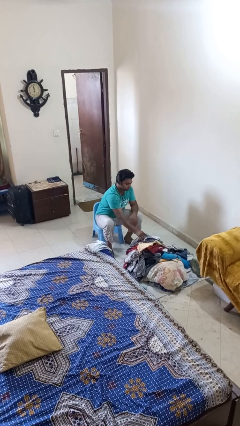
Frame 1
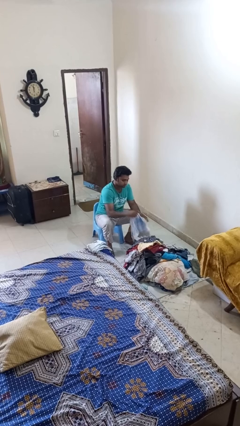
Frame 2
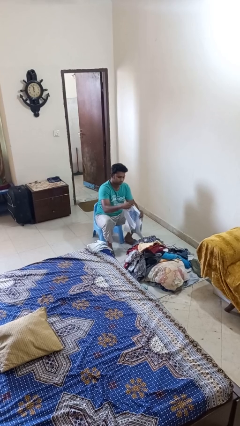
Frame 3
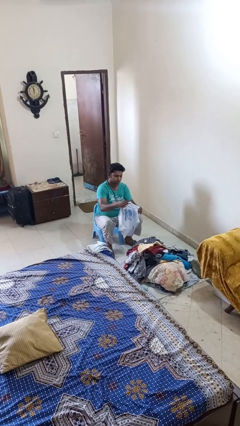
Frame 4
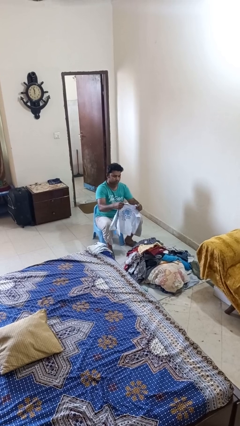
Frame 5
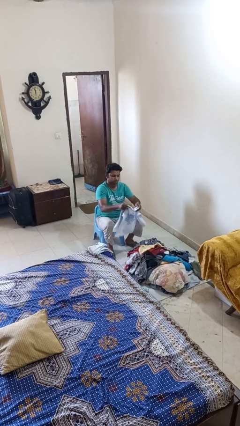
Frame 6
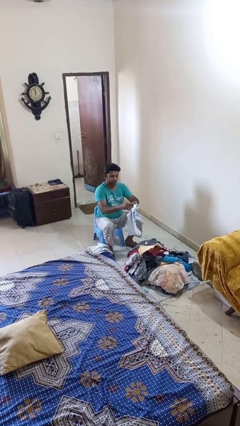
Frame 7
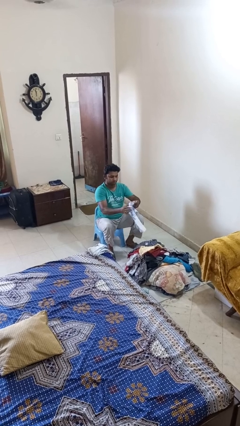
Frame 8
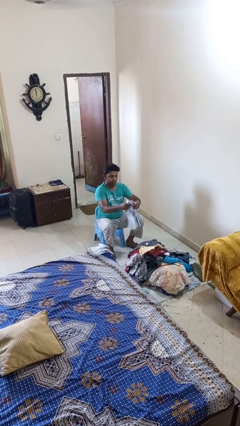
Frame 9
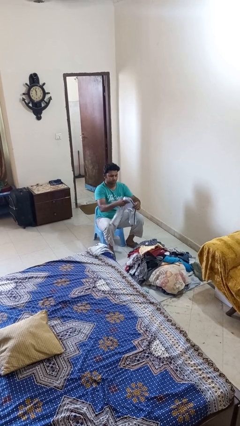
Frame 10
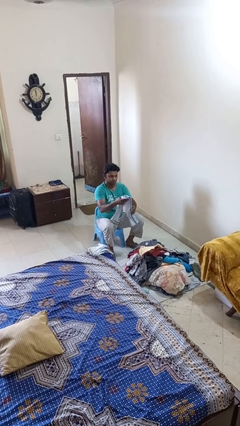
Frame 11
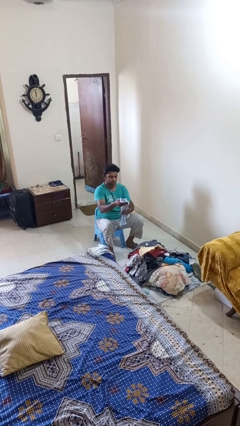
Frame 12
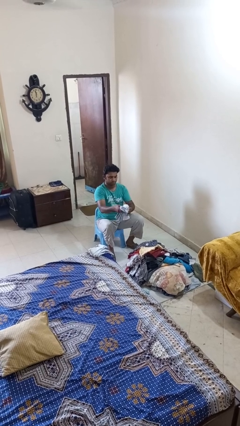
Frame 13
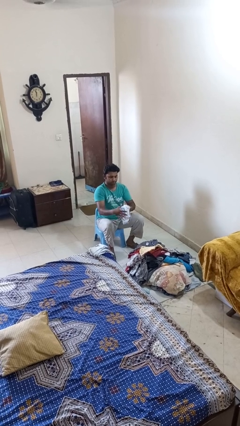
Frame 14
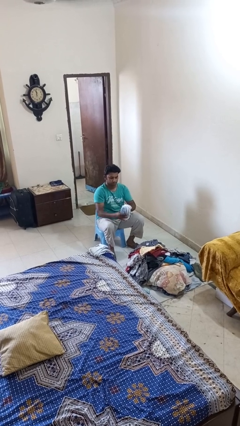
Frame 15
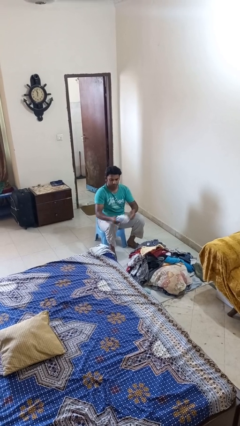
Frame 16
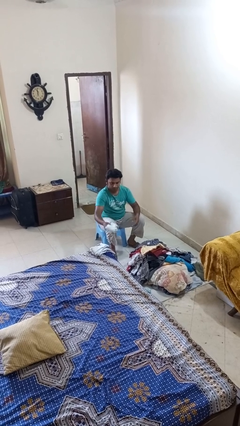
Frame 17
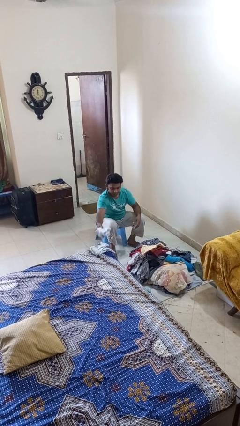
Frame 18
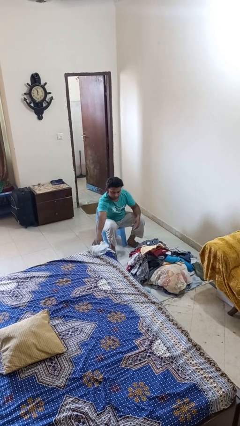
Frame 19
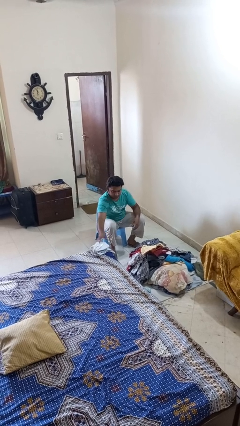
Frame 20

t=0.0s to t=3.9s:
person folds shirt

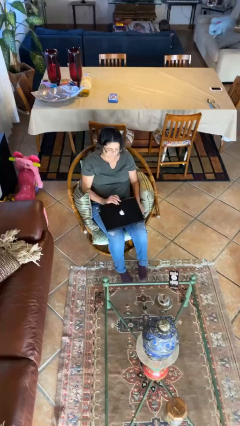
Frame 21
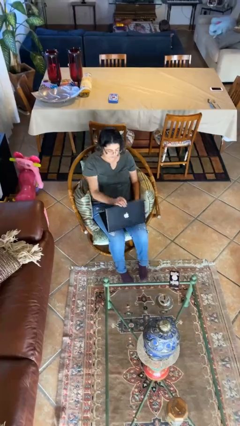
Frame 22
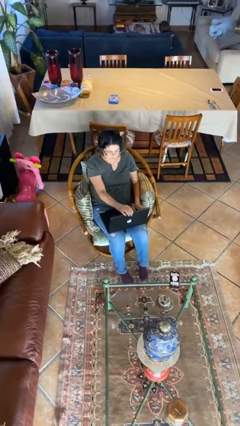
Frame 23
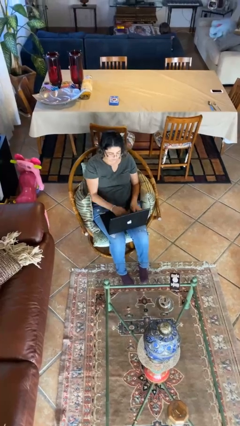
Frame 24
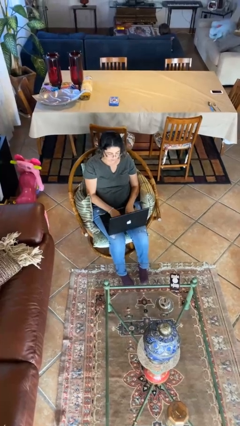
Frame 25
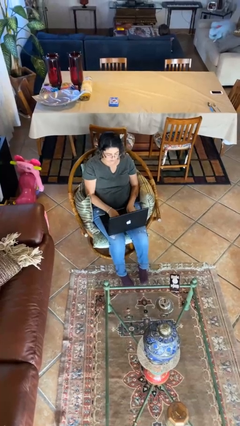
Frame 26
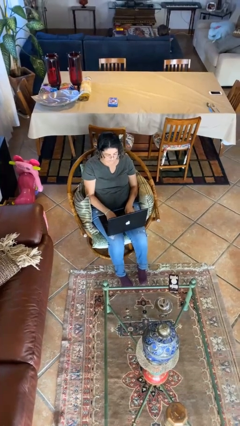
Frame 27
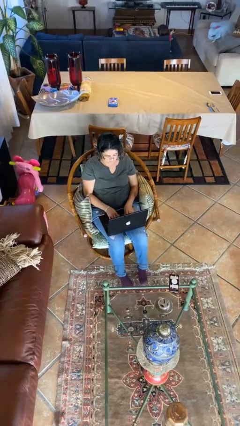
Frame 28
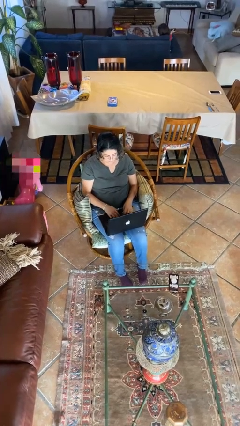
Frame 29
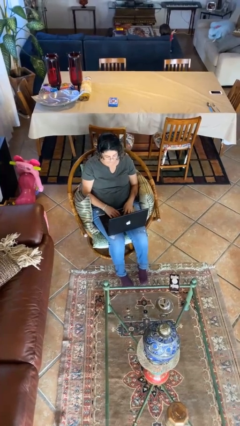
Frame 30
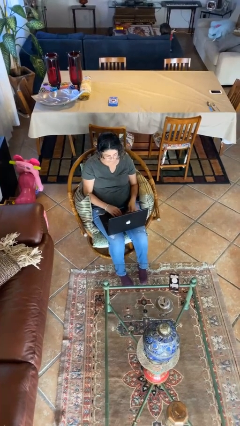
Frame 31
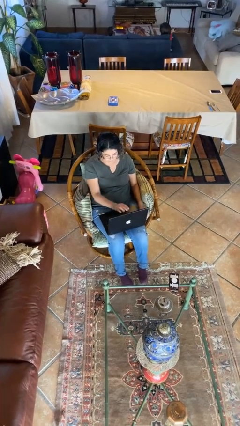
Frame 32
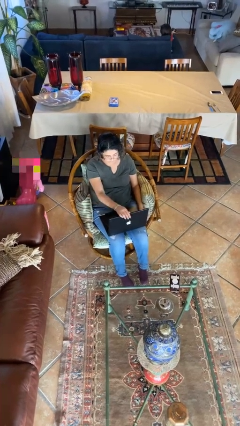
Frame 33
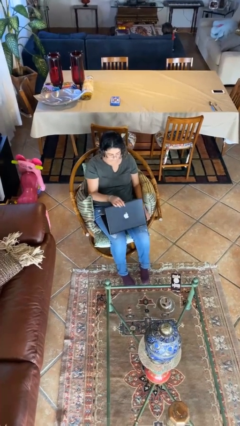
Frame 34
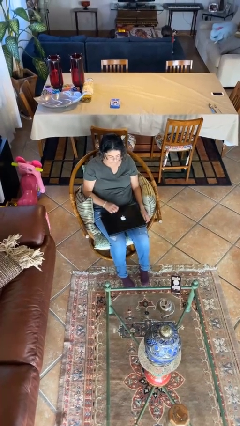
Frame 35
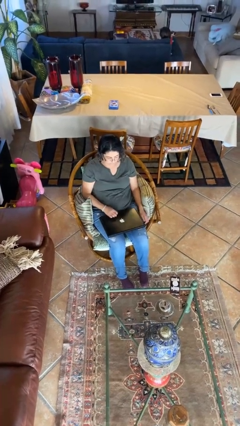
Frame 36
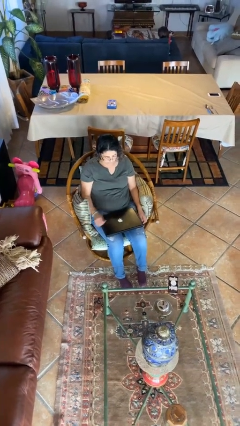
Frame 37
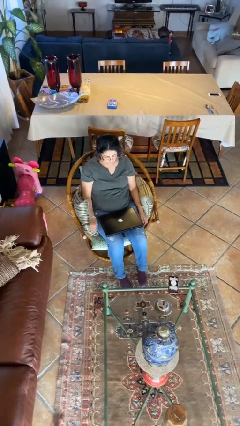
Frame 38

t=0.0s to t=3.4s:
person interacts with laptop

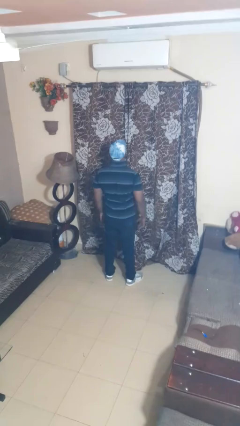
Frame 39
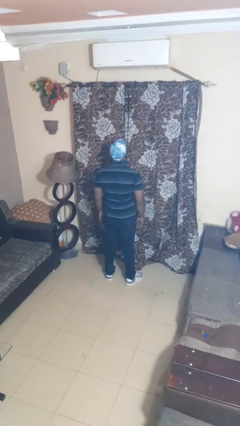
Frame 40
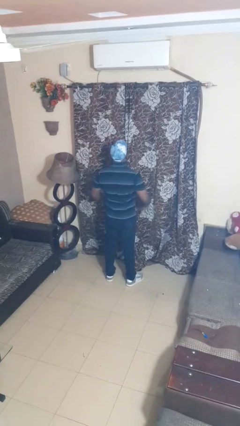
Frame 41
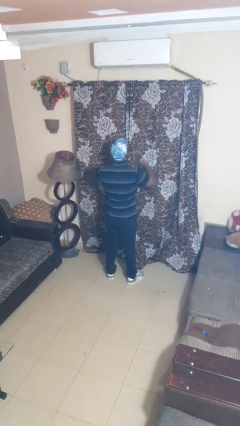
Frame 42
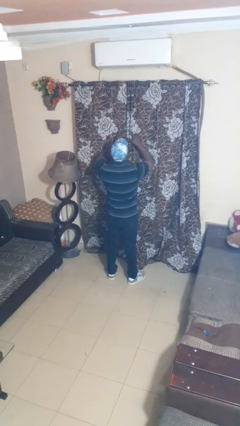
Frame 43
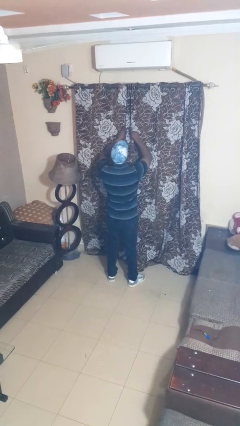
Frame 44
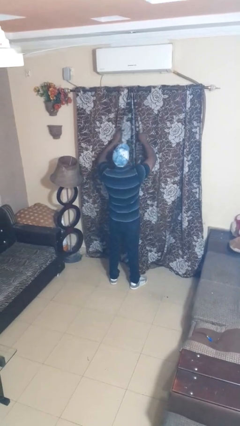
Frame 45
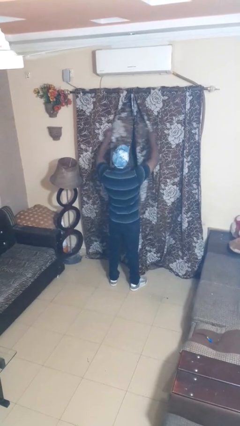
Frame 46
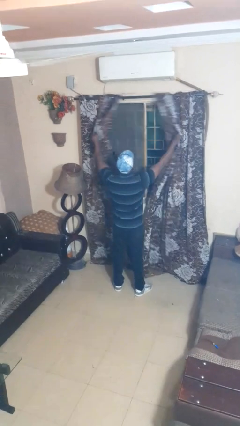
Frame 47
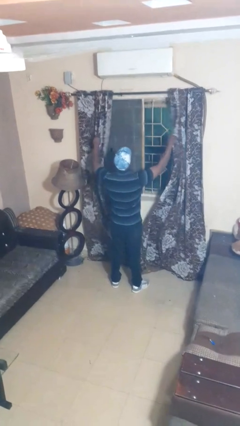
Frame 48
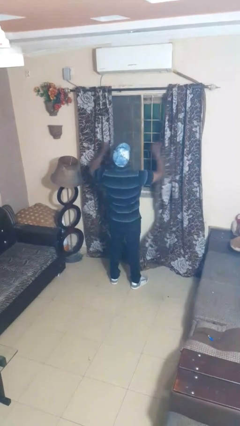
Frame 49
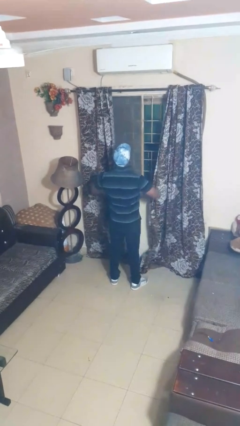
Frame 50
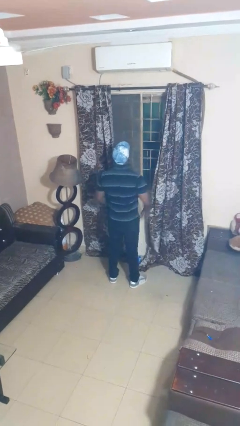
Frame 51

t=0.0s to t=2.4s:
person opens curtains

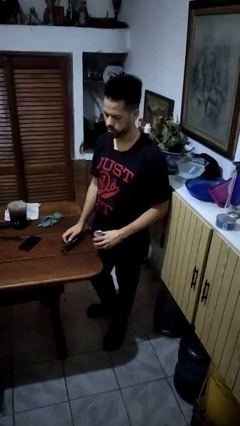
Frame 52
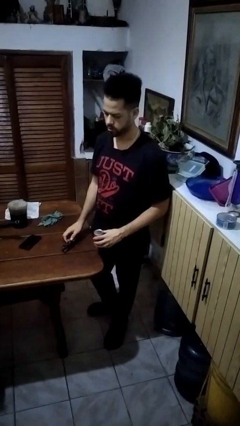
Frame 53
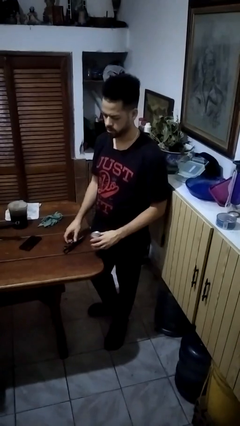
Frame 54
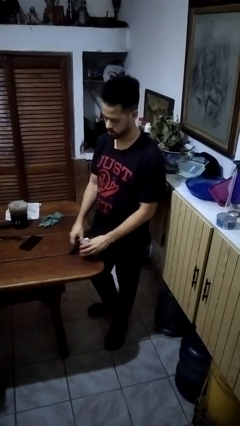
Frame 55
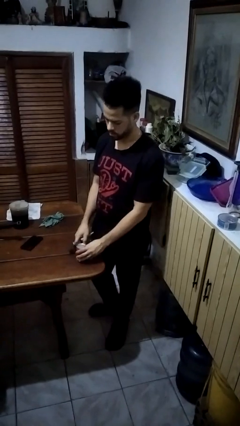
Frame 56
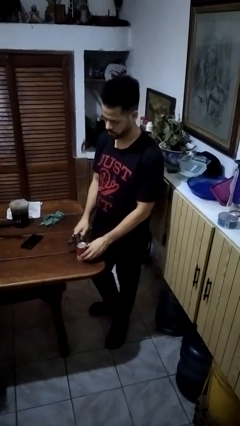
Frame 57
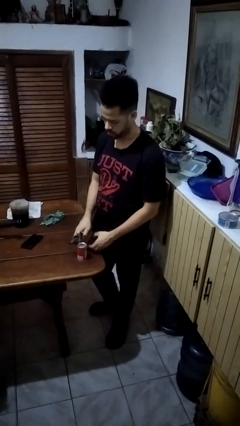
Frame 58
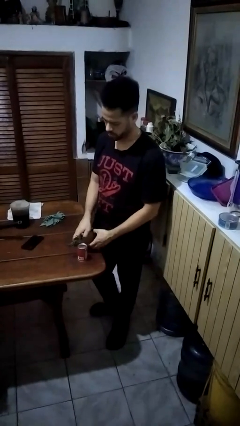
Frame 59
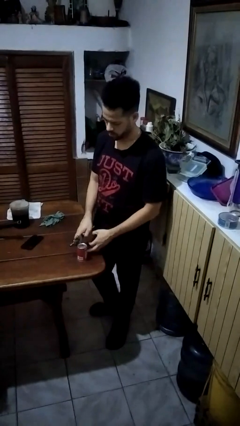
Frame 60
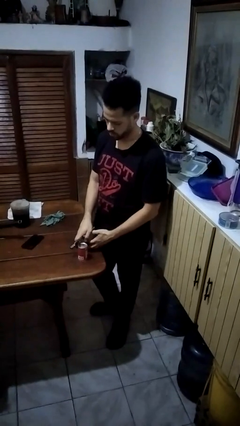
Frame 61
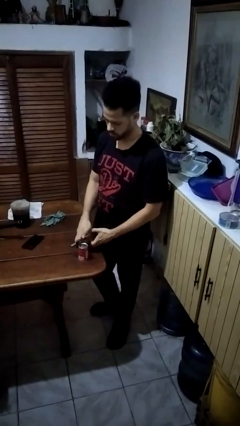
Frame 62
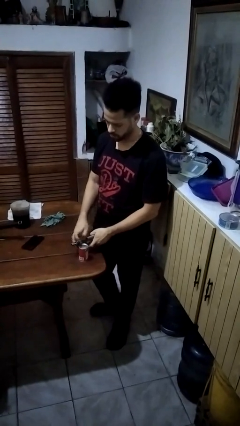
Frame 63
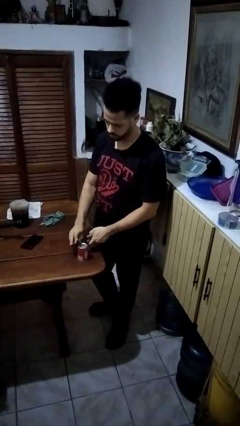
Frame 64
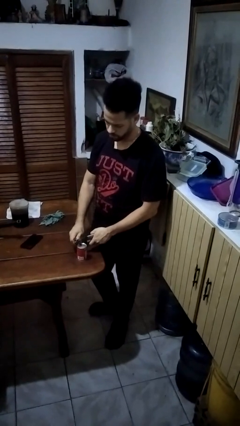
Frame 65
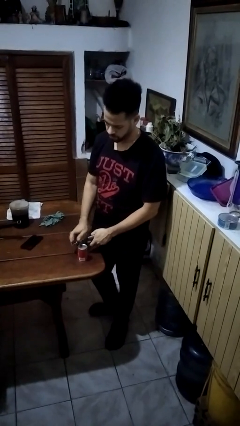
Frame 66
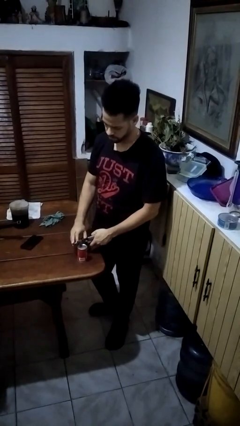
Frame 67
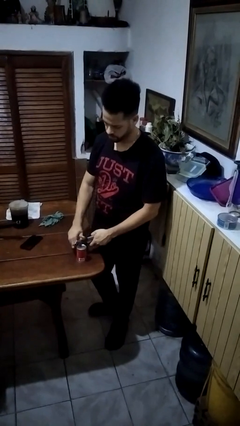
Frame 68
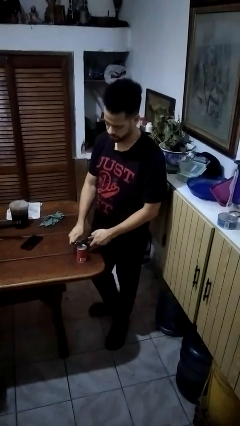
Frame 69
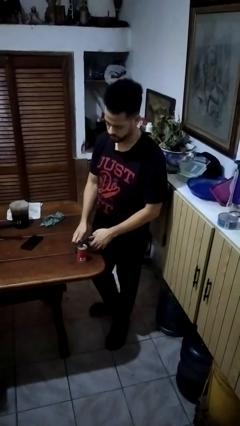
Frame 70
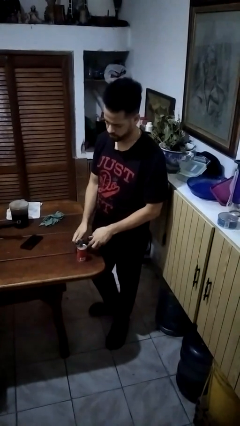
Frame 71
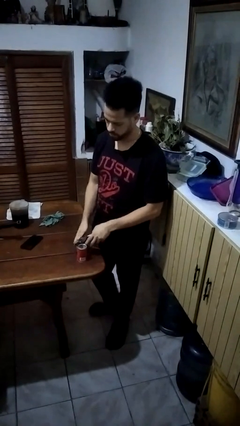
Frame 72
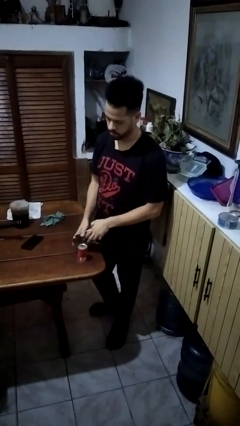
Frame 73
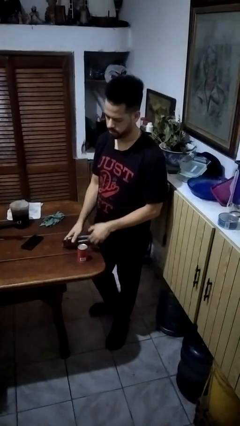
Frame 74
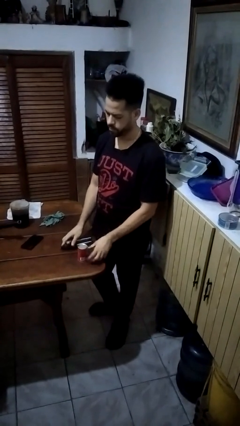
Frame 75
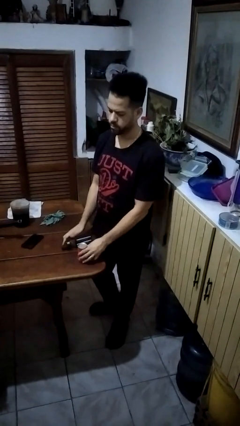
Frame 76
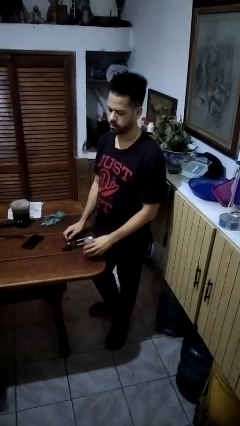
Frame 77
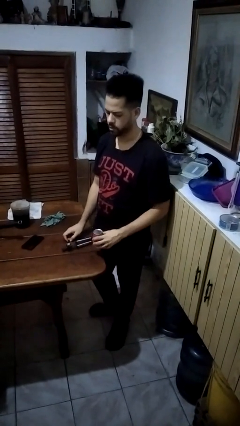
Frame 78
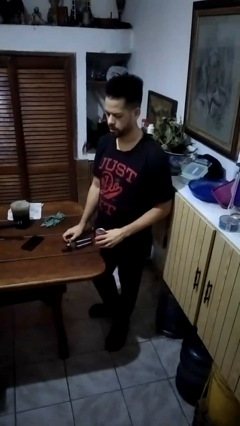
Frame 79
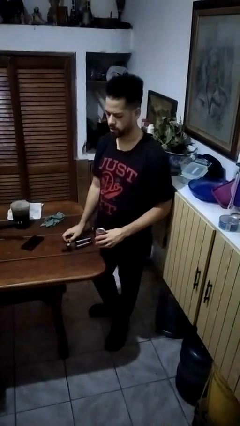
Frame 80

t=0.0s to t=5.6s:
person opens can with can opener

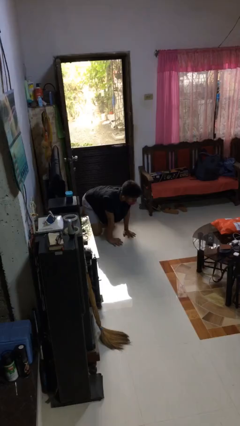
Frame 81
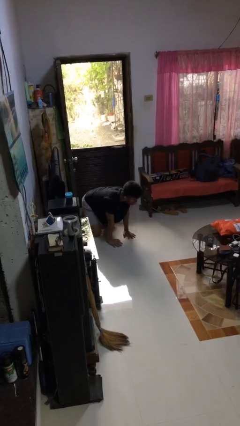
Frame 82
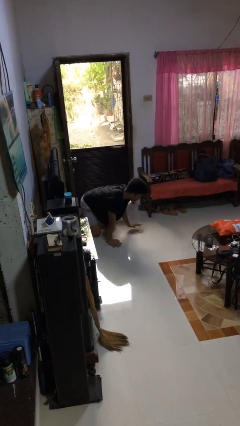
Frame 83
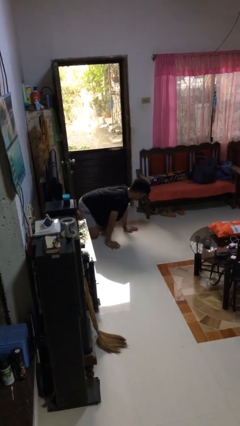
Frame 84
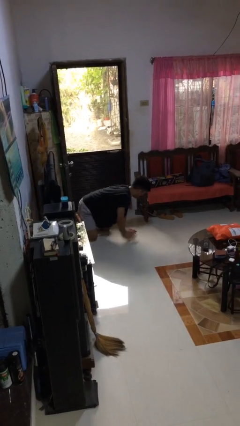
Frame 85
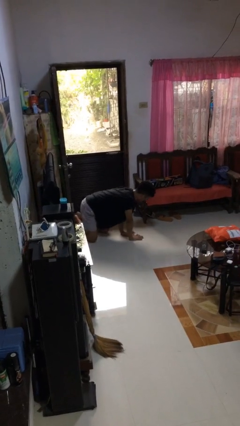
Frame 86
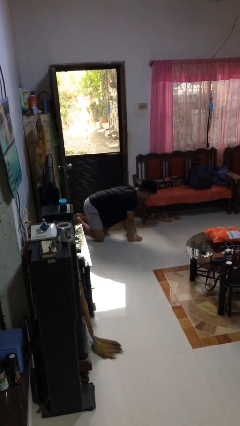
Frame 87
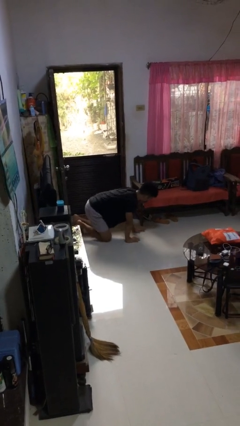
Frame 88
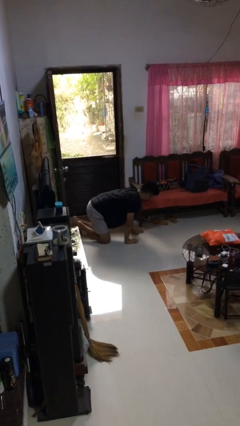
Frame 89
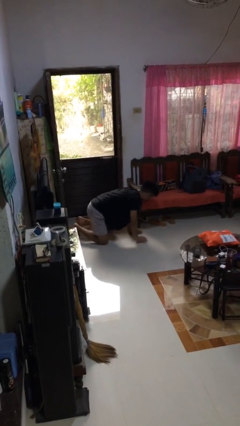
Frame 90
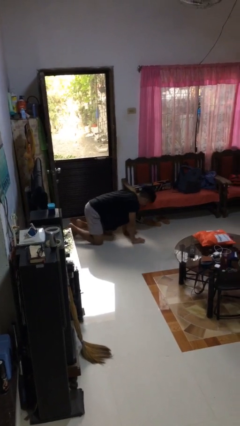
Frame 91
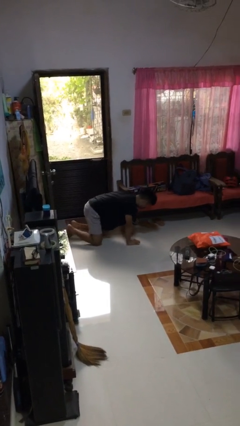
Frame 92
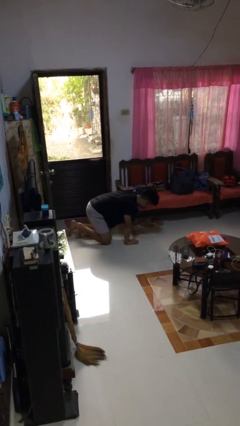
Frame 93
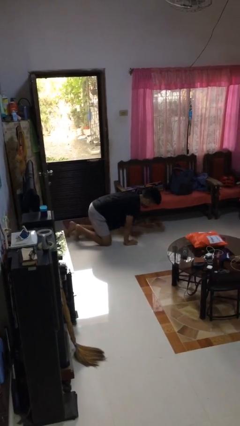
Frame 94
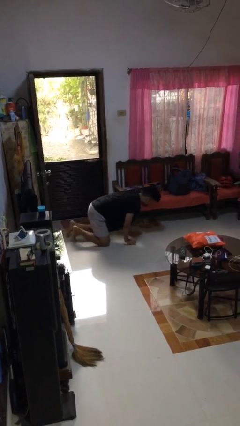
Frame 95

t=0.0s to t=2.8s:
person crawls
